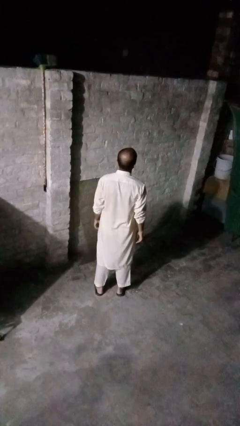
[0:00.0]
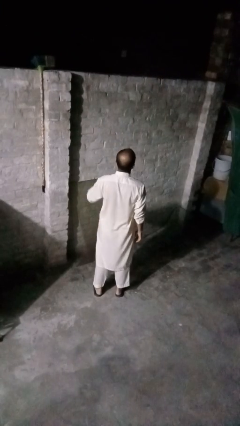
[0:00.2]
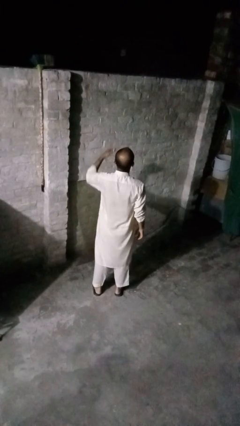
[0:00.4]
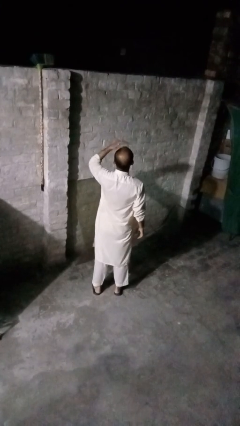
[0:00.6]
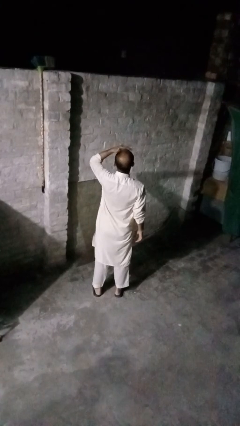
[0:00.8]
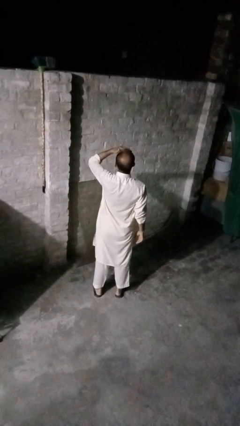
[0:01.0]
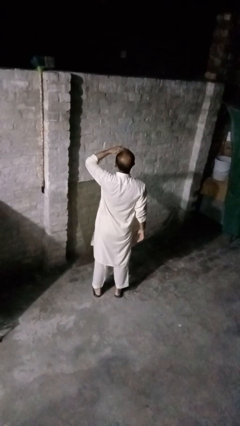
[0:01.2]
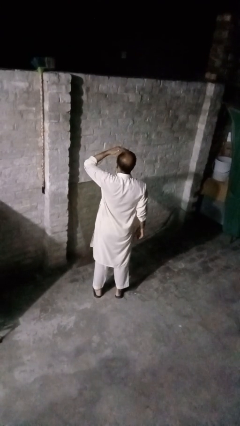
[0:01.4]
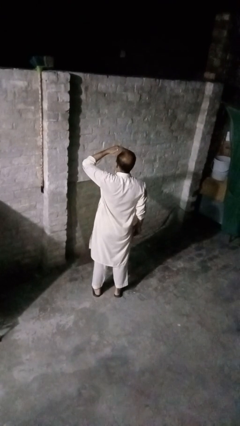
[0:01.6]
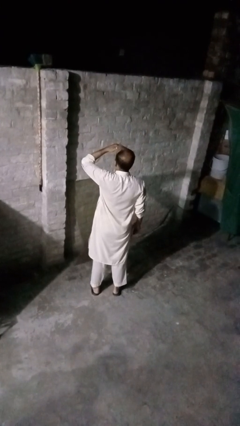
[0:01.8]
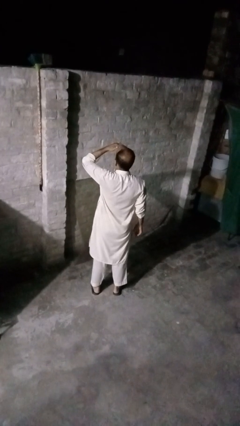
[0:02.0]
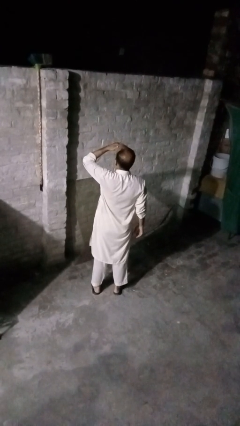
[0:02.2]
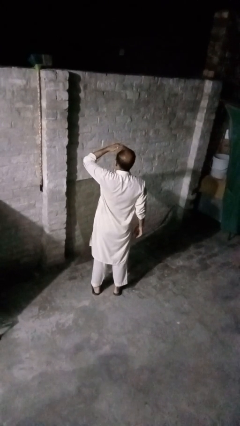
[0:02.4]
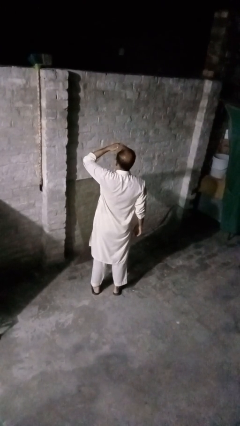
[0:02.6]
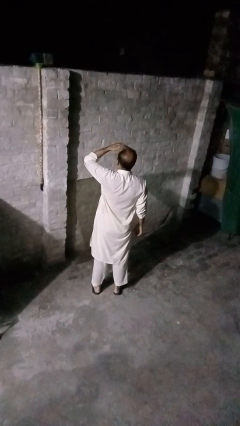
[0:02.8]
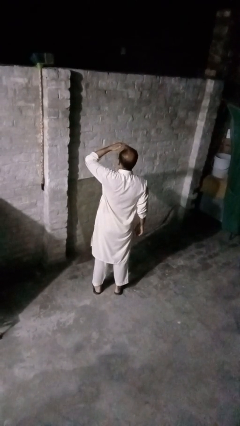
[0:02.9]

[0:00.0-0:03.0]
person shades eyes

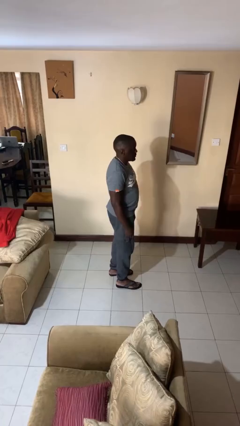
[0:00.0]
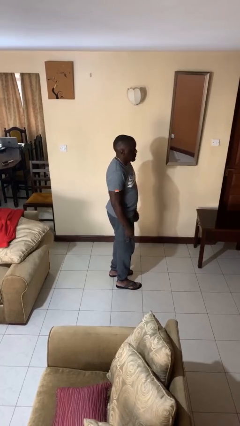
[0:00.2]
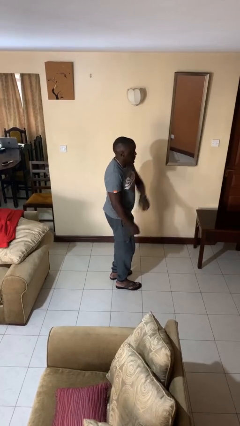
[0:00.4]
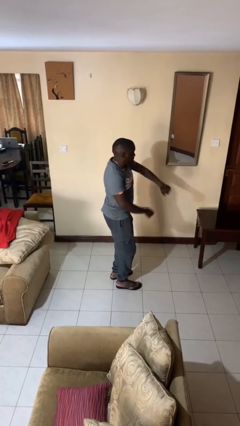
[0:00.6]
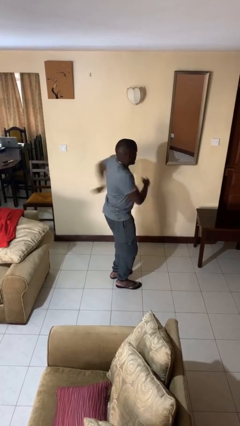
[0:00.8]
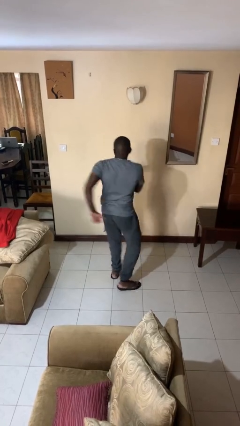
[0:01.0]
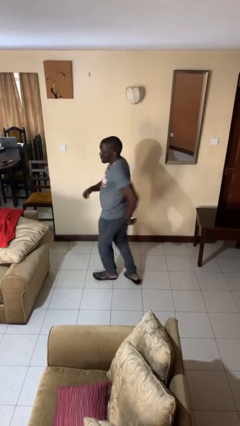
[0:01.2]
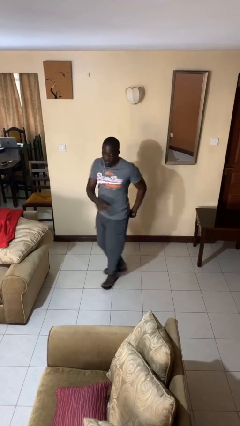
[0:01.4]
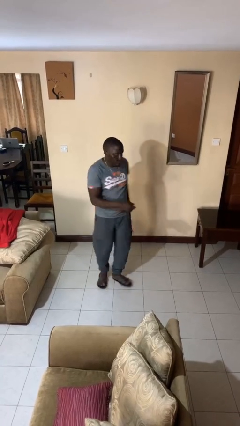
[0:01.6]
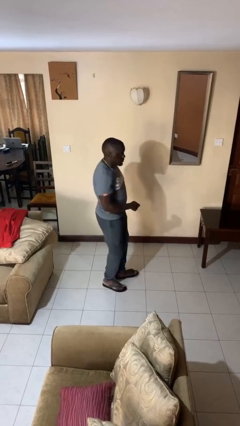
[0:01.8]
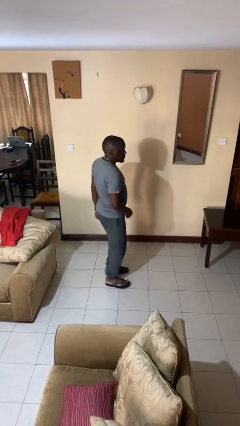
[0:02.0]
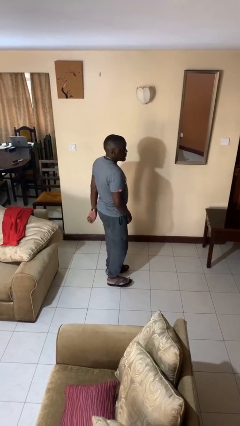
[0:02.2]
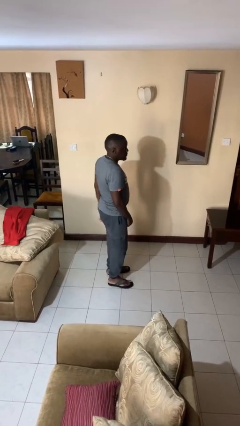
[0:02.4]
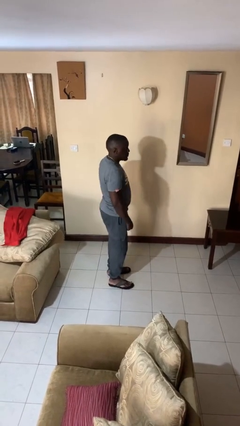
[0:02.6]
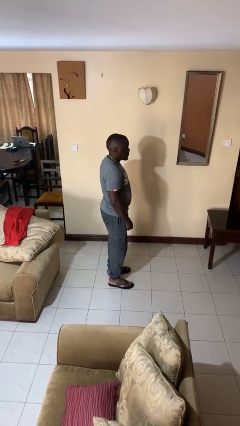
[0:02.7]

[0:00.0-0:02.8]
person twirls

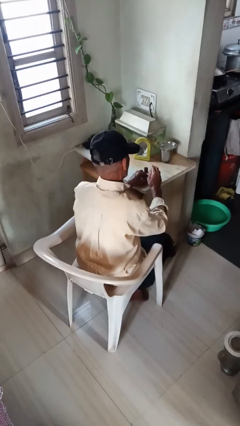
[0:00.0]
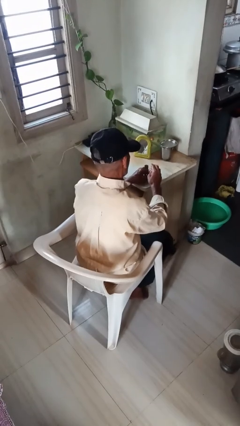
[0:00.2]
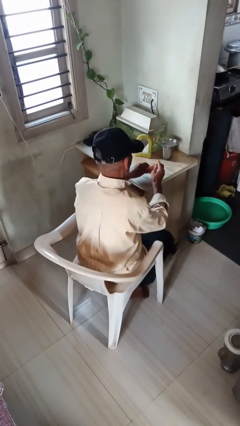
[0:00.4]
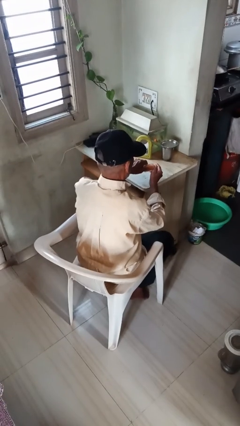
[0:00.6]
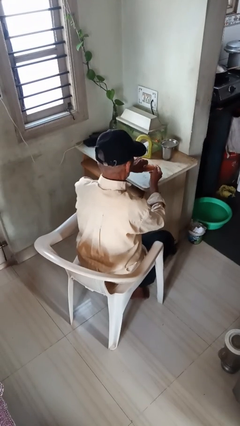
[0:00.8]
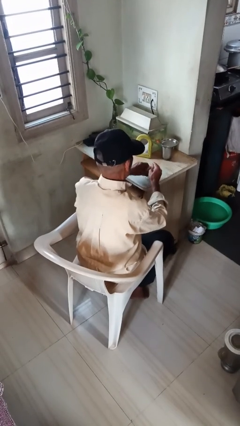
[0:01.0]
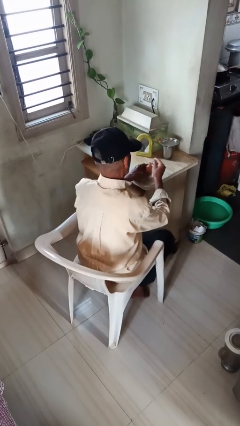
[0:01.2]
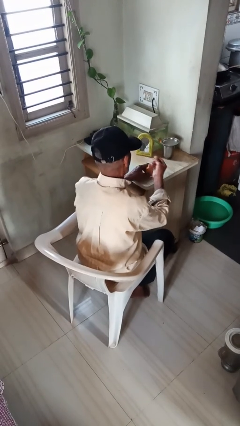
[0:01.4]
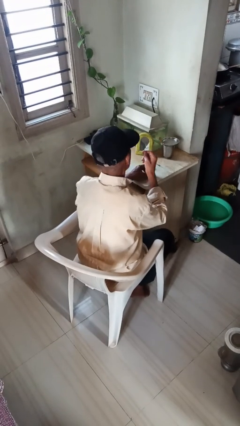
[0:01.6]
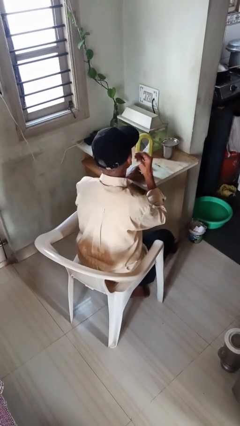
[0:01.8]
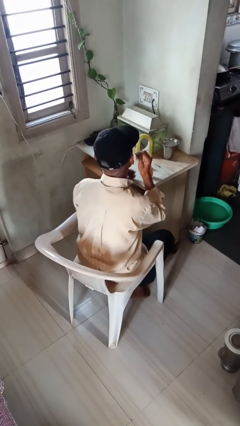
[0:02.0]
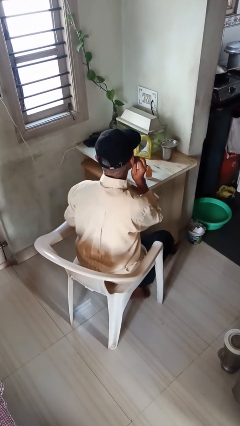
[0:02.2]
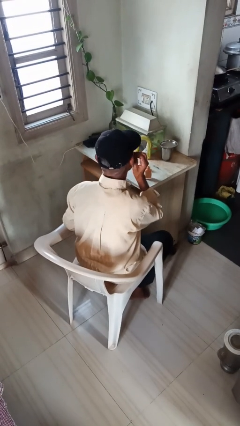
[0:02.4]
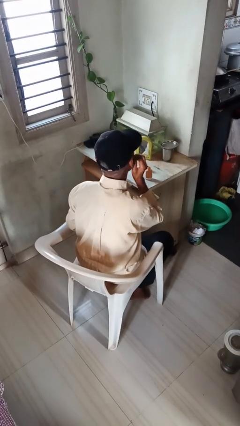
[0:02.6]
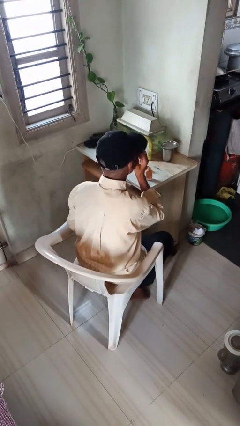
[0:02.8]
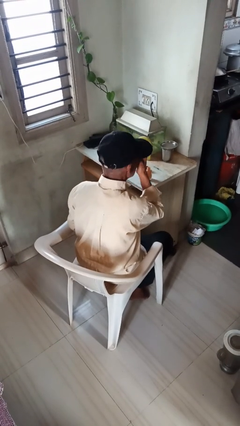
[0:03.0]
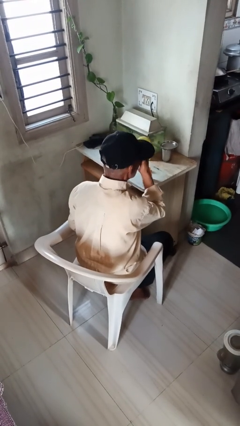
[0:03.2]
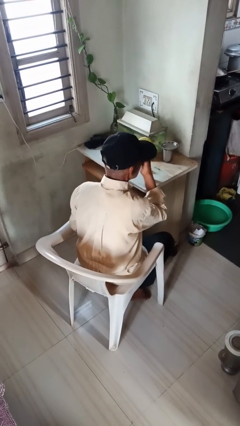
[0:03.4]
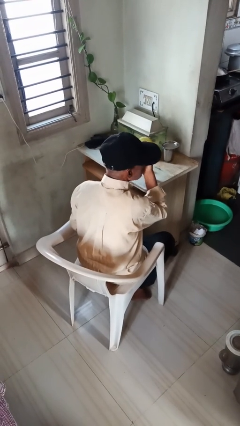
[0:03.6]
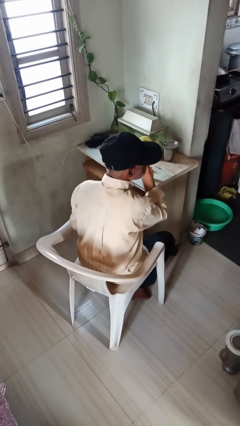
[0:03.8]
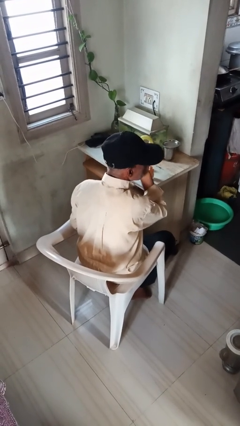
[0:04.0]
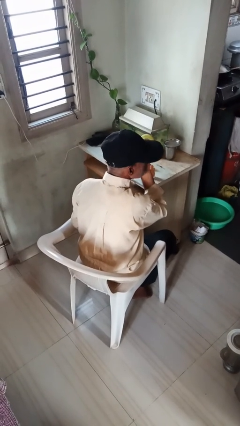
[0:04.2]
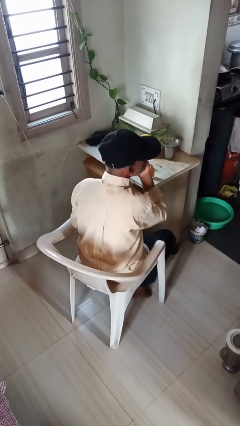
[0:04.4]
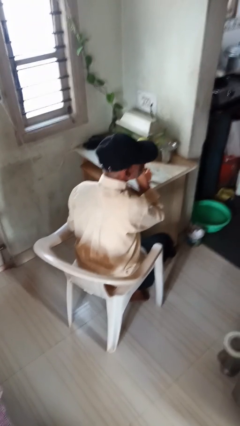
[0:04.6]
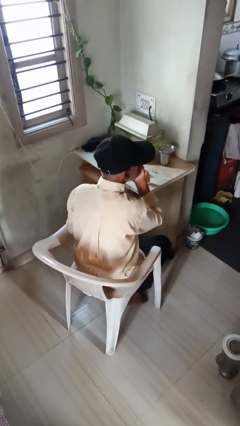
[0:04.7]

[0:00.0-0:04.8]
person applies foundation makeup

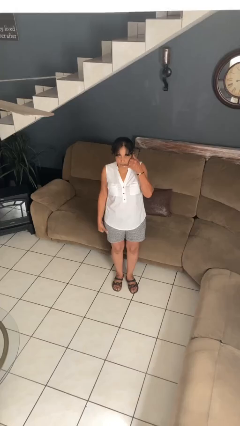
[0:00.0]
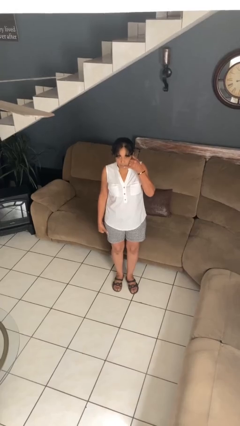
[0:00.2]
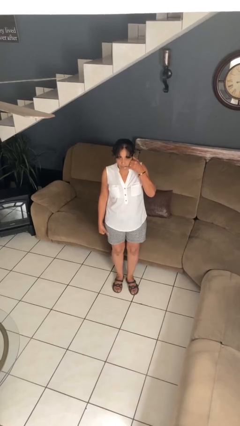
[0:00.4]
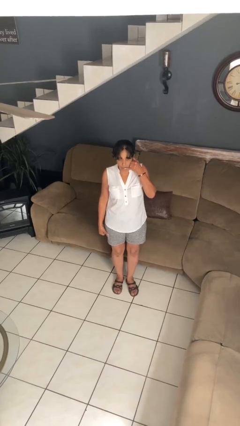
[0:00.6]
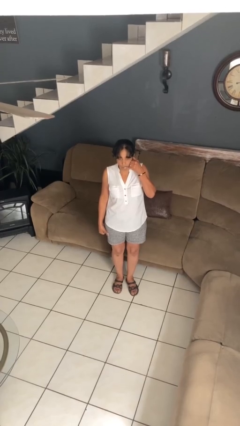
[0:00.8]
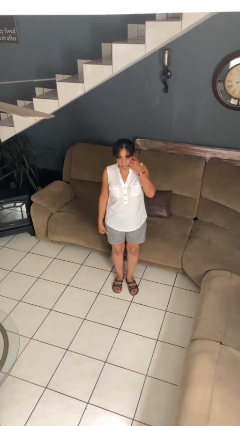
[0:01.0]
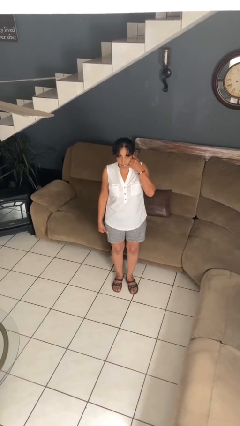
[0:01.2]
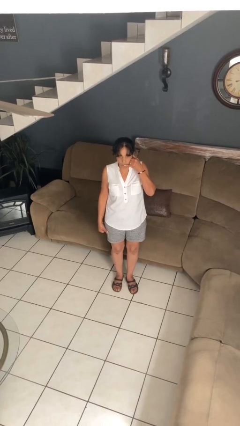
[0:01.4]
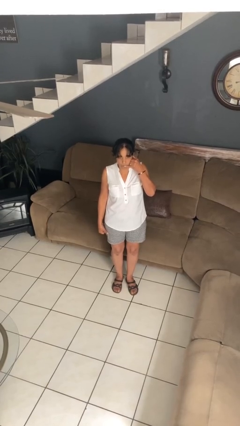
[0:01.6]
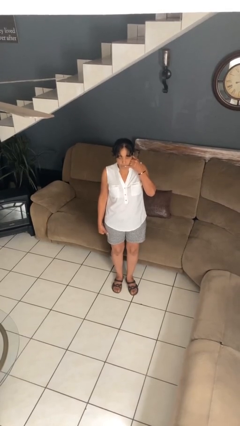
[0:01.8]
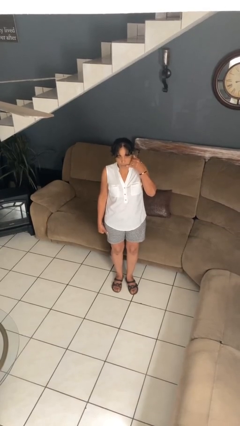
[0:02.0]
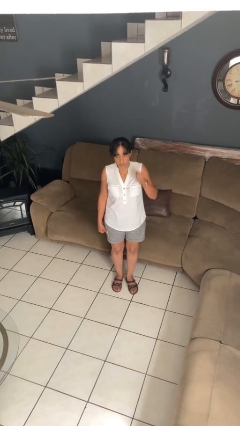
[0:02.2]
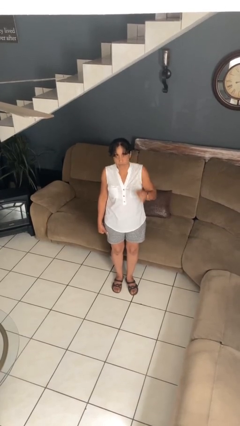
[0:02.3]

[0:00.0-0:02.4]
person gestures call me

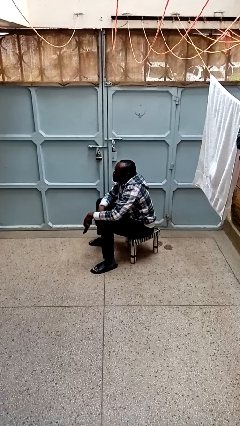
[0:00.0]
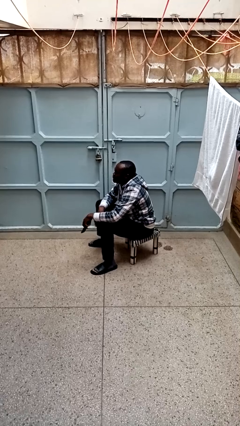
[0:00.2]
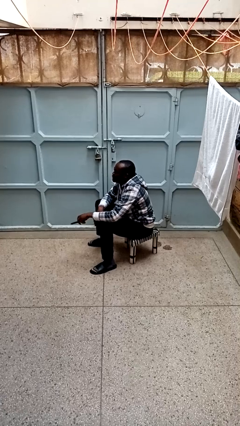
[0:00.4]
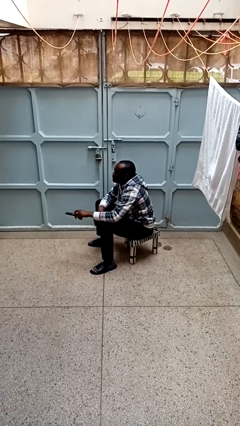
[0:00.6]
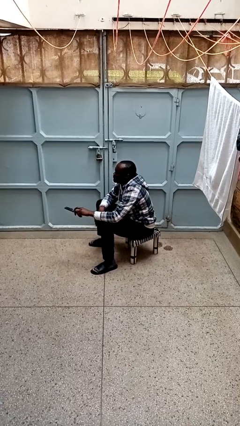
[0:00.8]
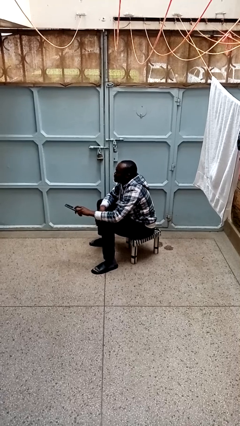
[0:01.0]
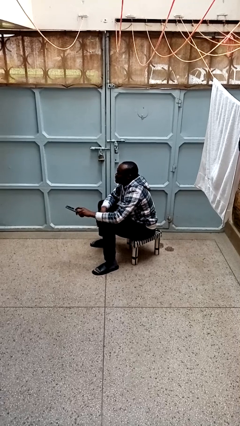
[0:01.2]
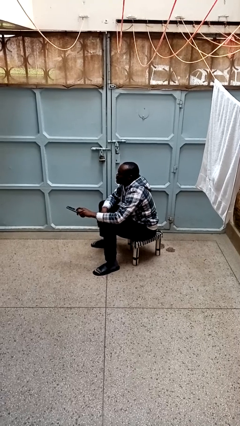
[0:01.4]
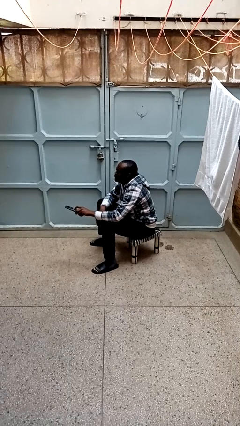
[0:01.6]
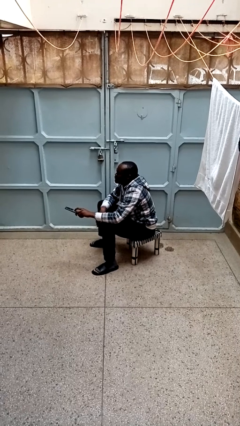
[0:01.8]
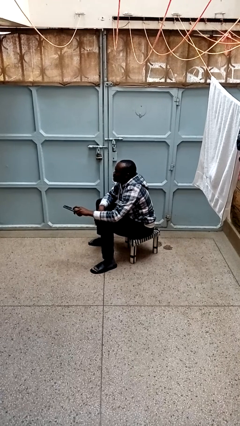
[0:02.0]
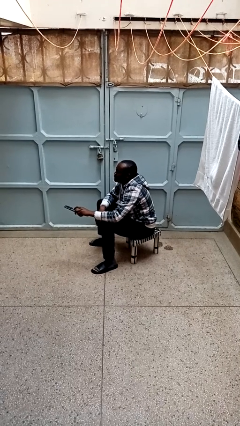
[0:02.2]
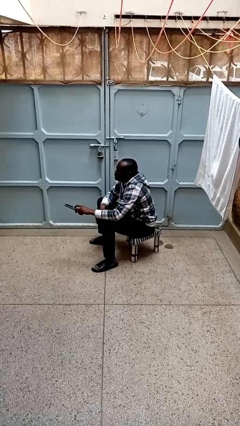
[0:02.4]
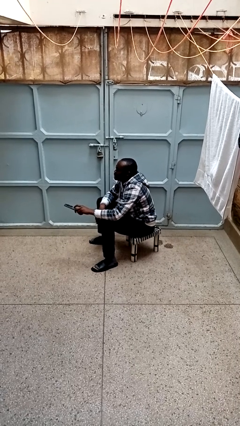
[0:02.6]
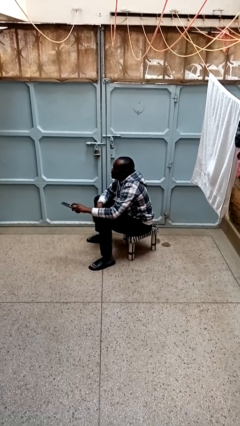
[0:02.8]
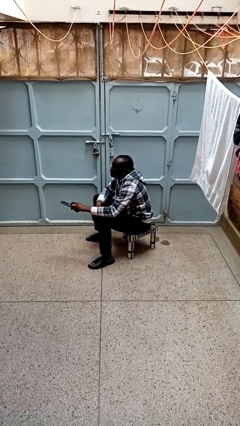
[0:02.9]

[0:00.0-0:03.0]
person uses television remote

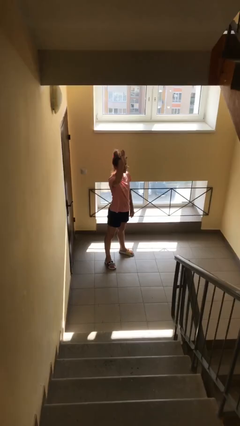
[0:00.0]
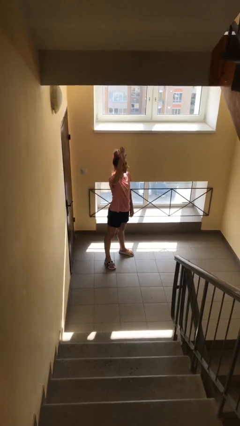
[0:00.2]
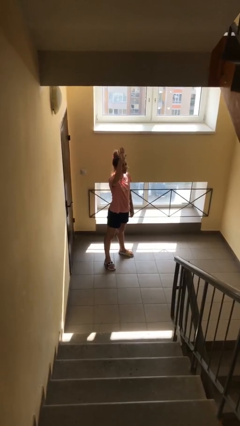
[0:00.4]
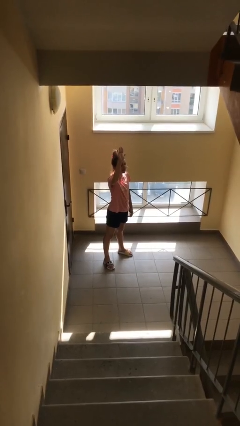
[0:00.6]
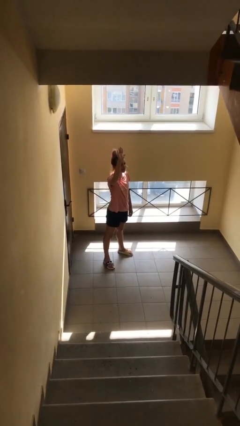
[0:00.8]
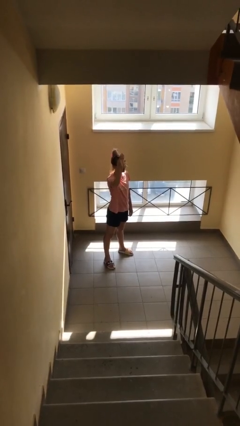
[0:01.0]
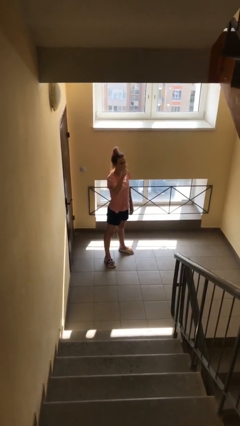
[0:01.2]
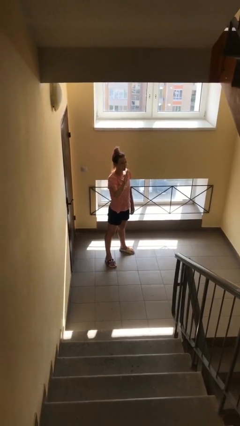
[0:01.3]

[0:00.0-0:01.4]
person gestures raise hand

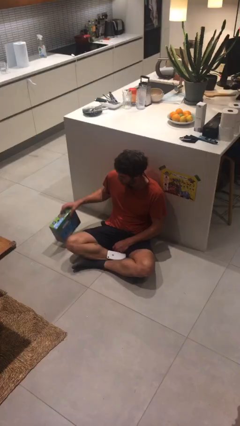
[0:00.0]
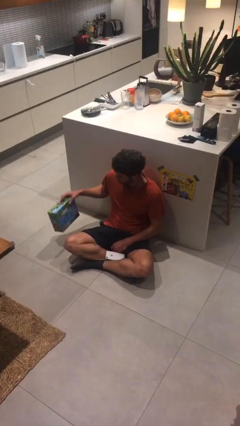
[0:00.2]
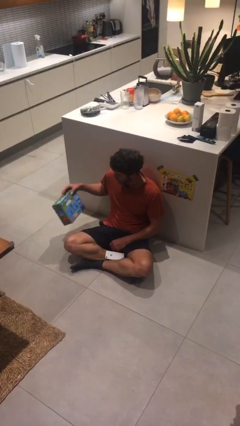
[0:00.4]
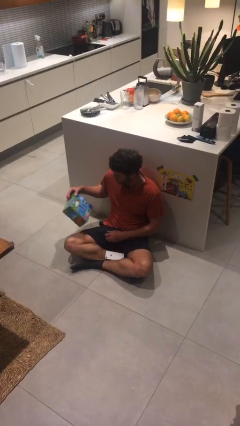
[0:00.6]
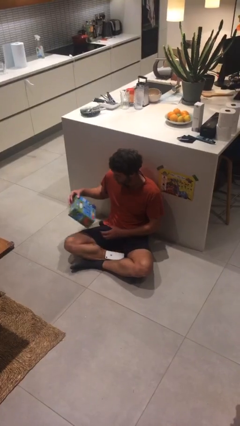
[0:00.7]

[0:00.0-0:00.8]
person picks up object from floor
